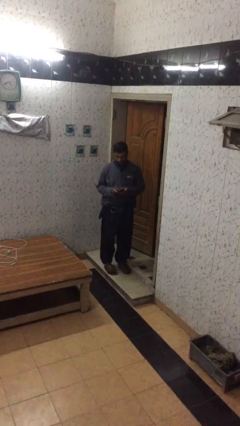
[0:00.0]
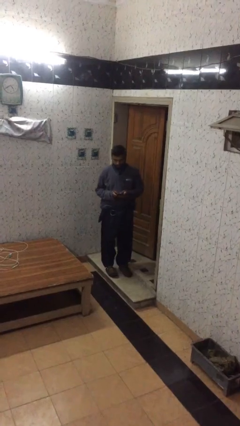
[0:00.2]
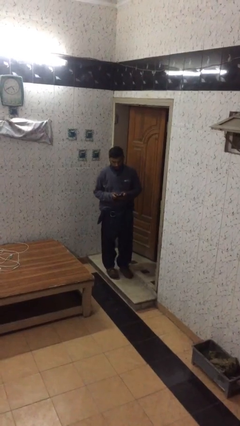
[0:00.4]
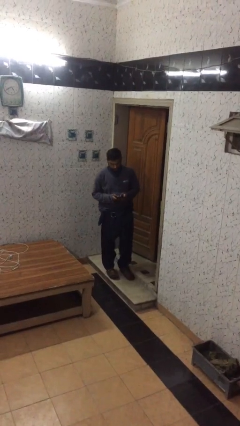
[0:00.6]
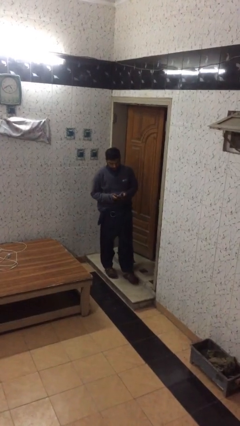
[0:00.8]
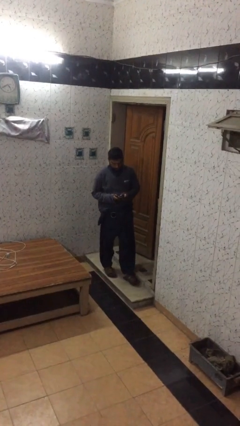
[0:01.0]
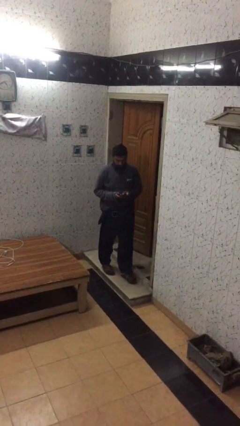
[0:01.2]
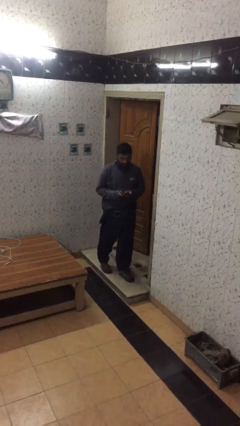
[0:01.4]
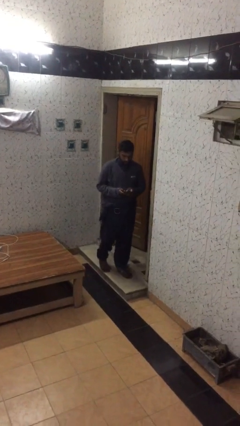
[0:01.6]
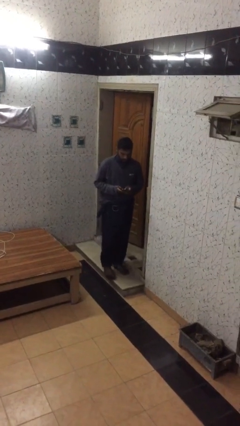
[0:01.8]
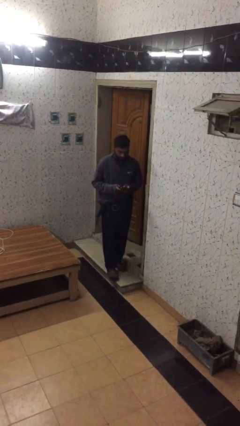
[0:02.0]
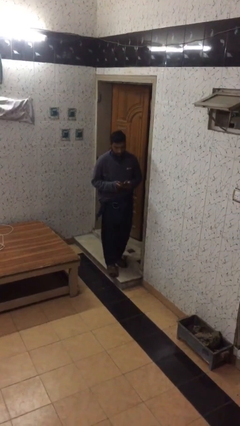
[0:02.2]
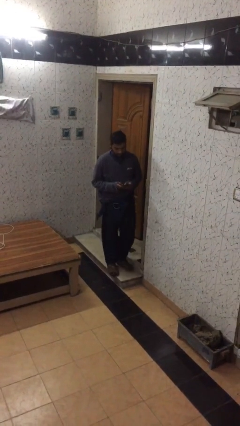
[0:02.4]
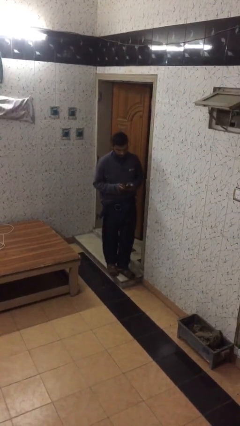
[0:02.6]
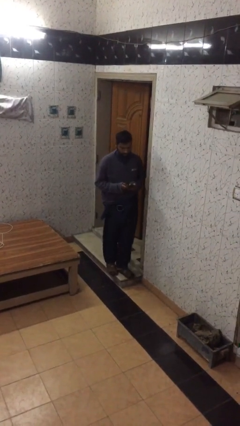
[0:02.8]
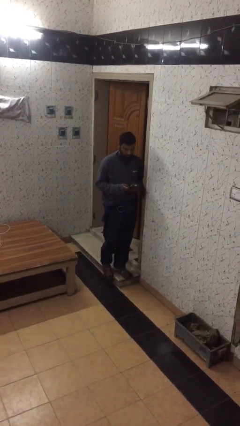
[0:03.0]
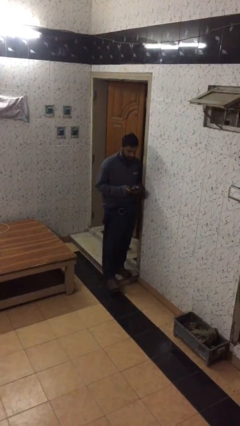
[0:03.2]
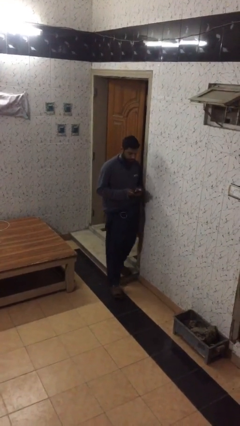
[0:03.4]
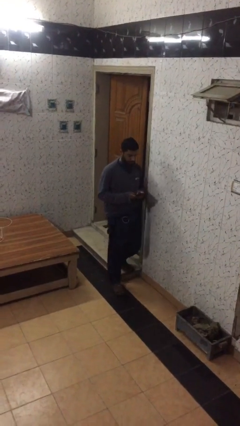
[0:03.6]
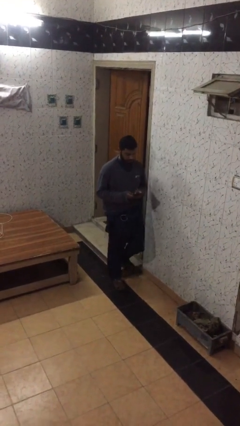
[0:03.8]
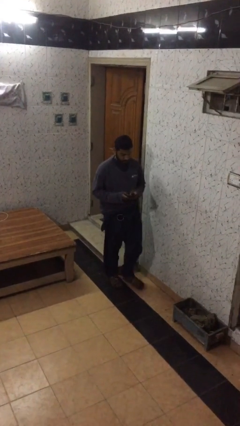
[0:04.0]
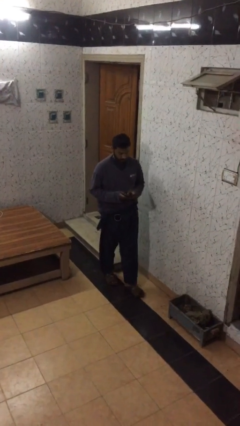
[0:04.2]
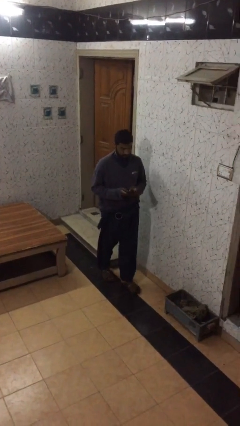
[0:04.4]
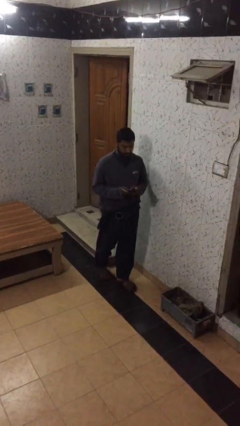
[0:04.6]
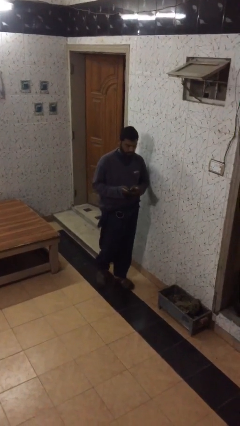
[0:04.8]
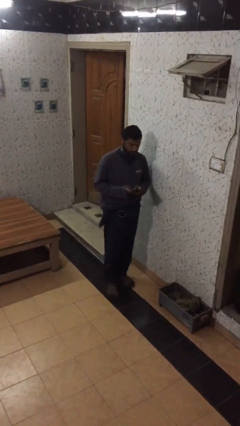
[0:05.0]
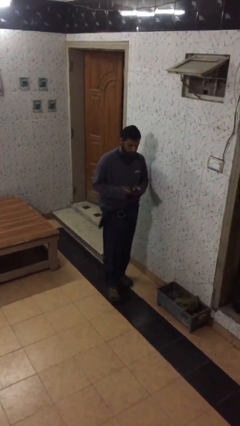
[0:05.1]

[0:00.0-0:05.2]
person texts on phone

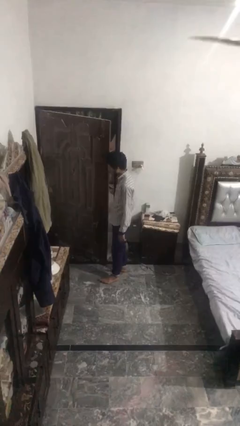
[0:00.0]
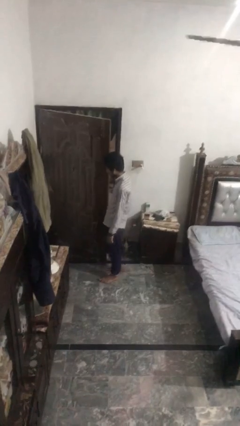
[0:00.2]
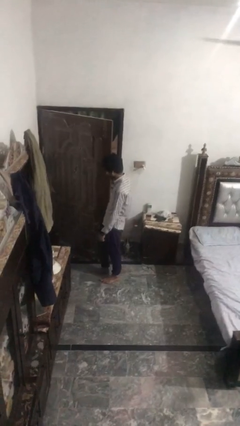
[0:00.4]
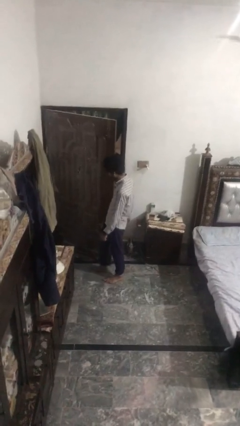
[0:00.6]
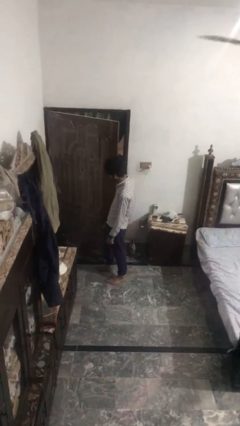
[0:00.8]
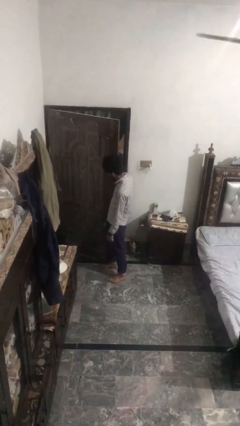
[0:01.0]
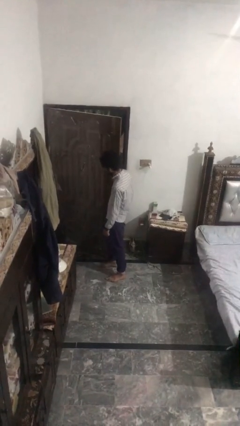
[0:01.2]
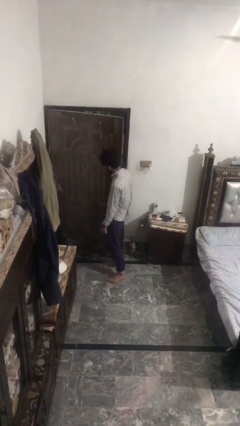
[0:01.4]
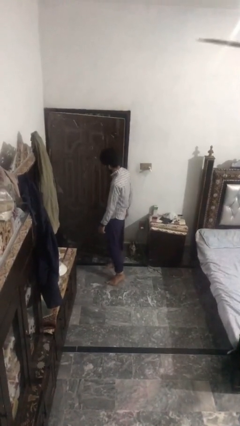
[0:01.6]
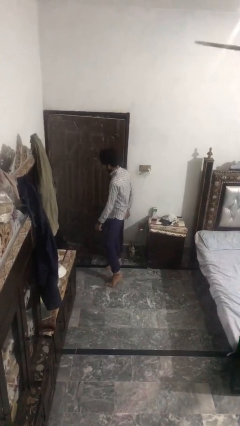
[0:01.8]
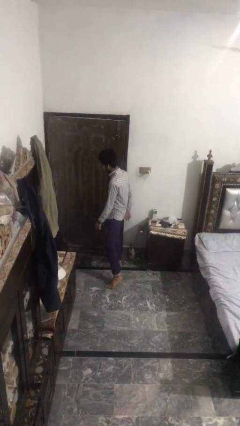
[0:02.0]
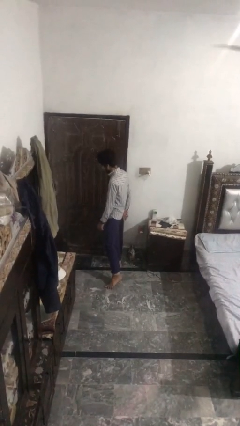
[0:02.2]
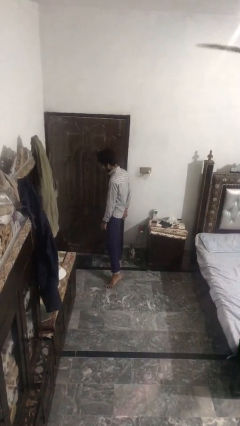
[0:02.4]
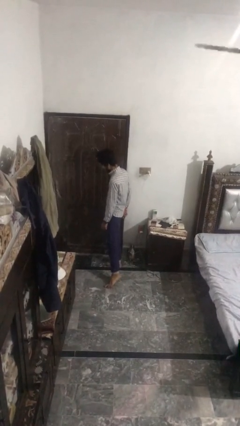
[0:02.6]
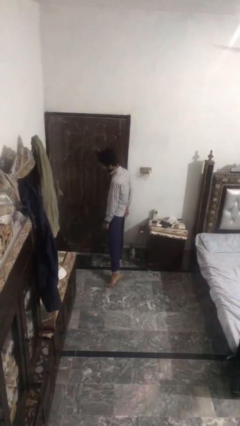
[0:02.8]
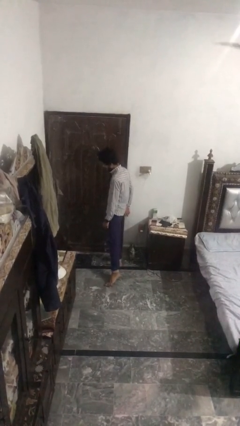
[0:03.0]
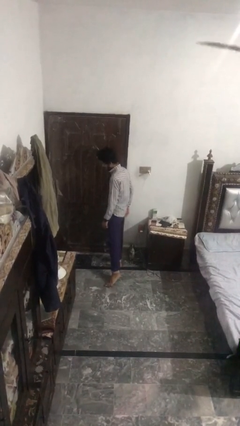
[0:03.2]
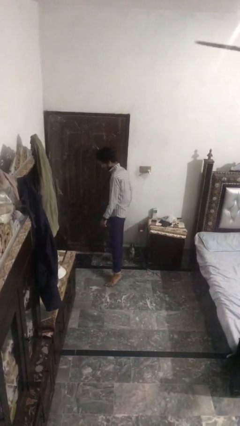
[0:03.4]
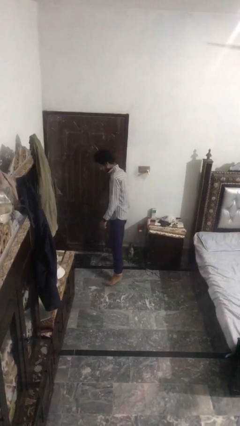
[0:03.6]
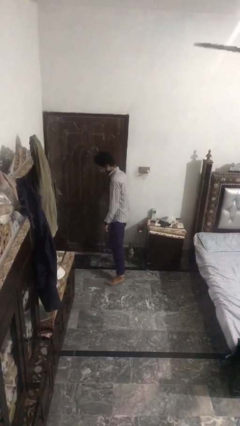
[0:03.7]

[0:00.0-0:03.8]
person closes door with hip

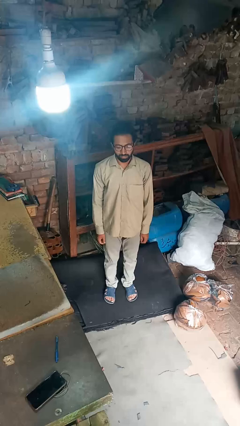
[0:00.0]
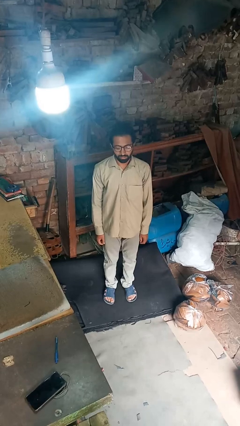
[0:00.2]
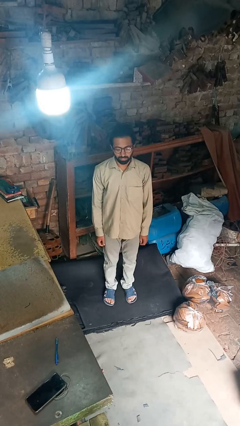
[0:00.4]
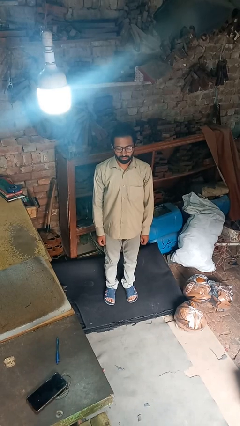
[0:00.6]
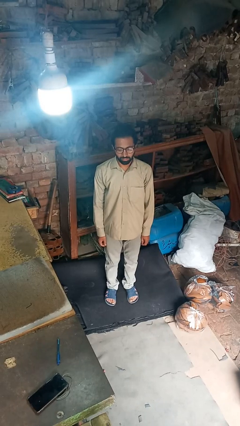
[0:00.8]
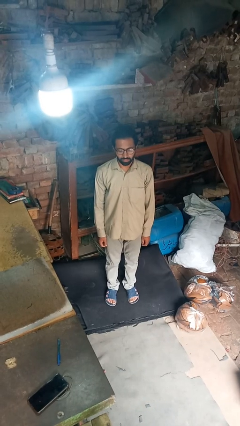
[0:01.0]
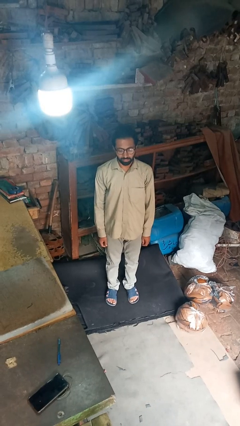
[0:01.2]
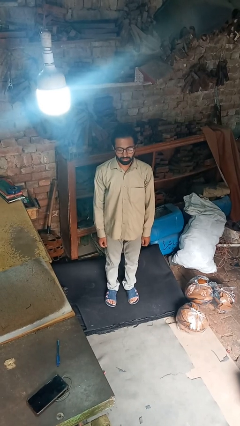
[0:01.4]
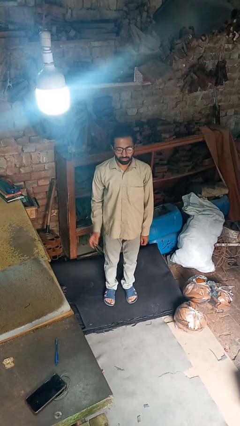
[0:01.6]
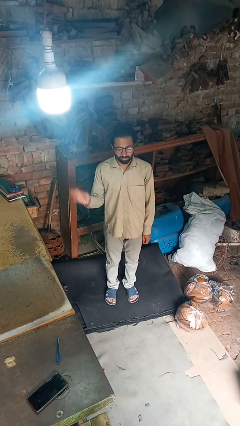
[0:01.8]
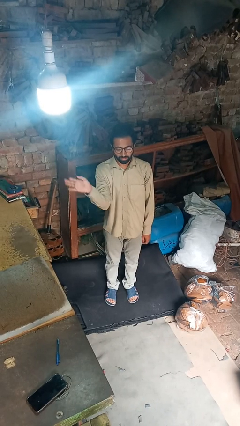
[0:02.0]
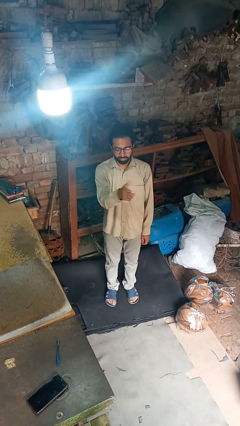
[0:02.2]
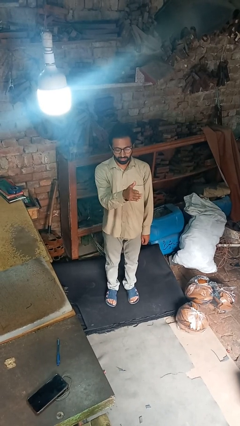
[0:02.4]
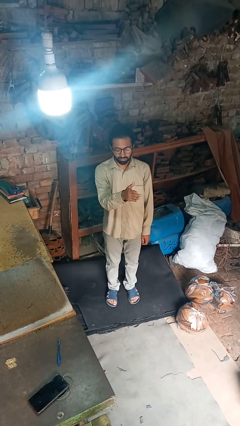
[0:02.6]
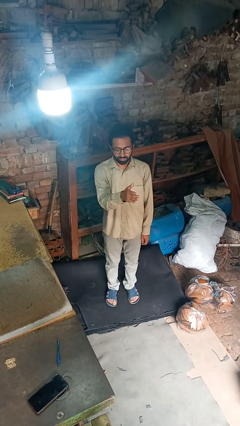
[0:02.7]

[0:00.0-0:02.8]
person punches

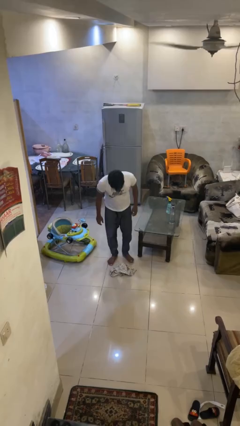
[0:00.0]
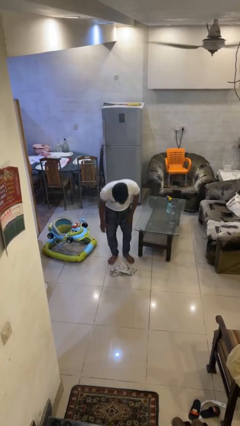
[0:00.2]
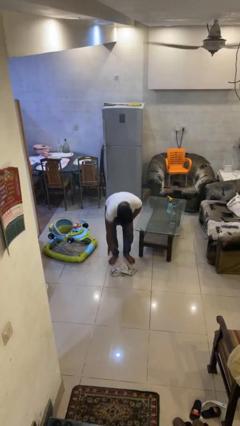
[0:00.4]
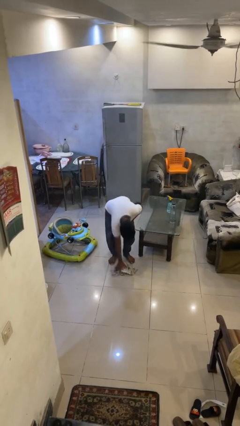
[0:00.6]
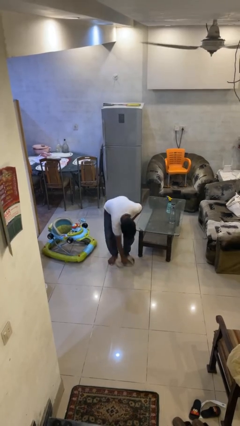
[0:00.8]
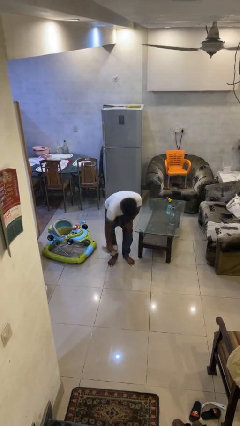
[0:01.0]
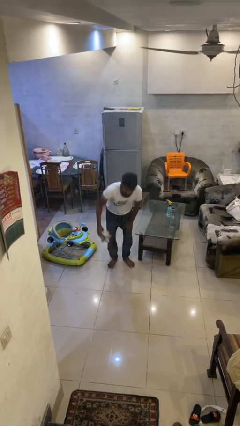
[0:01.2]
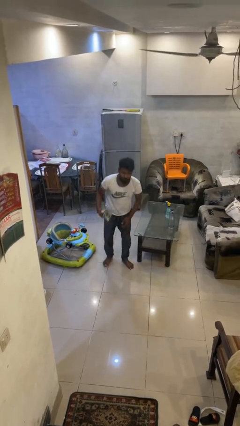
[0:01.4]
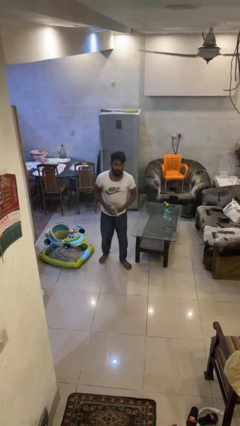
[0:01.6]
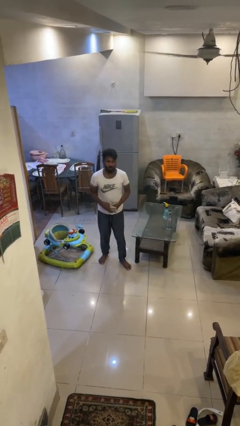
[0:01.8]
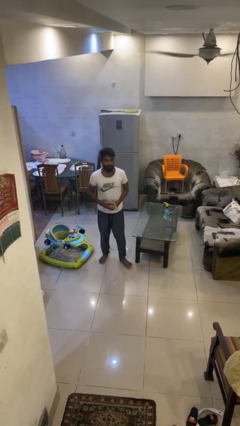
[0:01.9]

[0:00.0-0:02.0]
person picks up object from floor

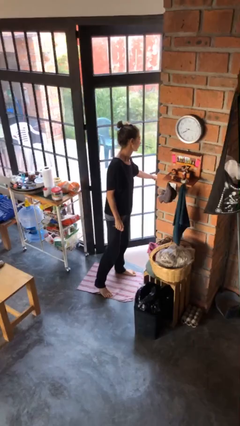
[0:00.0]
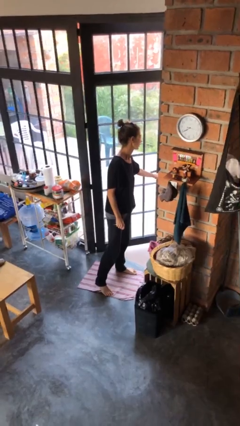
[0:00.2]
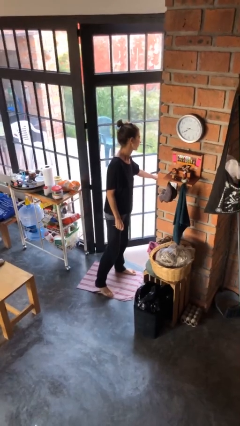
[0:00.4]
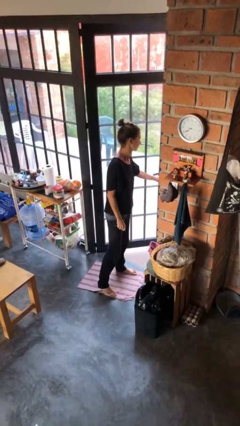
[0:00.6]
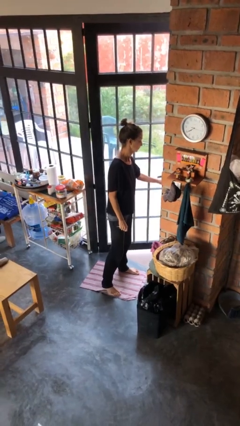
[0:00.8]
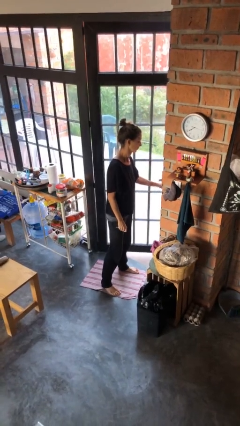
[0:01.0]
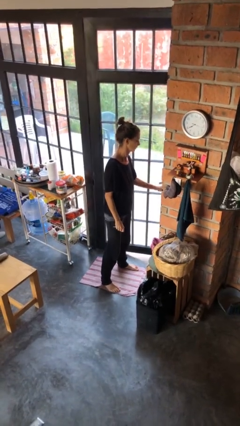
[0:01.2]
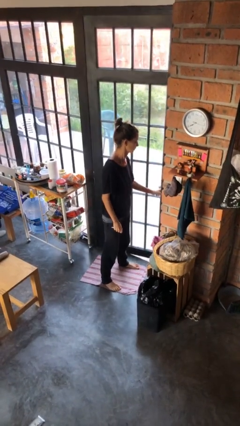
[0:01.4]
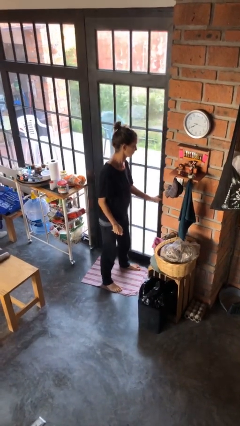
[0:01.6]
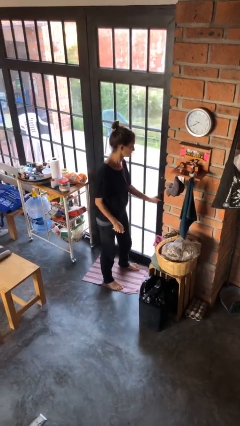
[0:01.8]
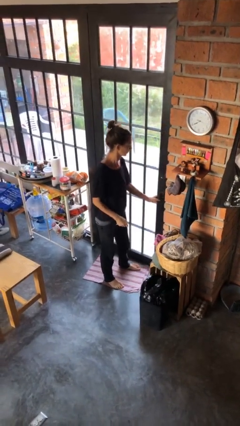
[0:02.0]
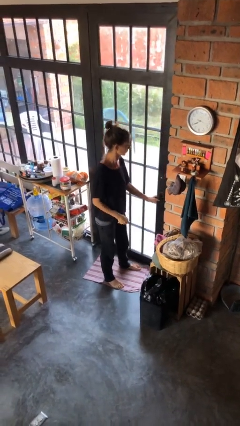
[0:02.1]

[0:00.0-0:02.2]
person closes facility door

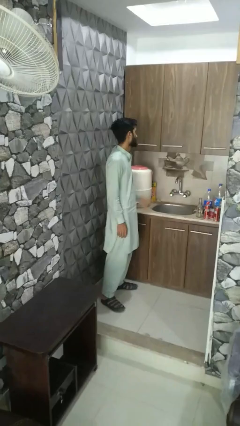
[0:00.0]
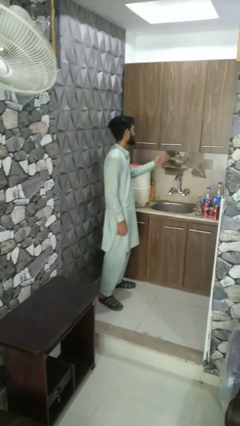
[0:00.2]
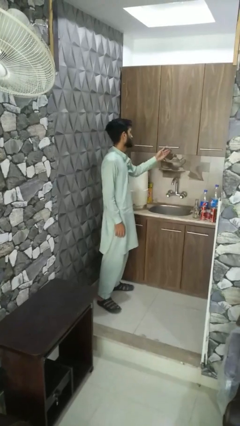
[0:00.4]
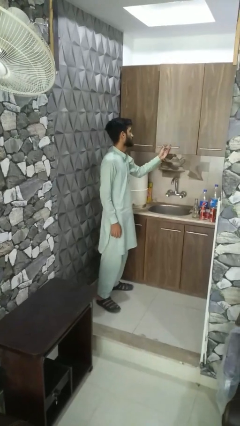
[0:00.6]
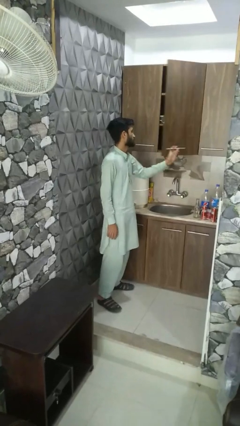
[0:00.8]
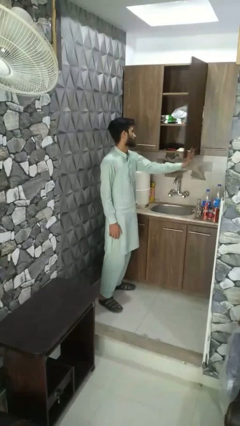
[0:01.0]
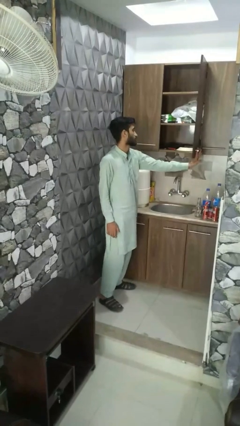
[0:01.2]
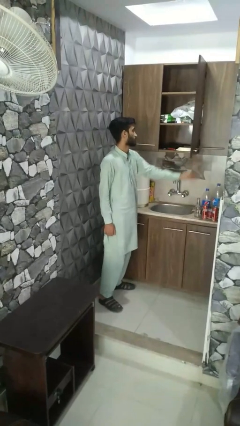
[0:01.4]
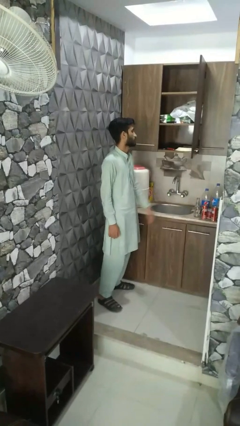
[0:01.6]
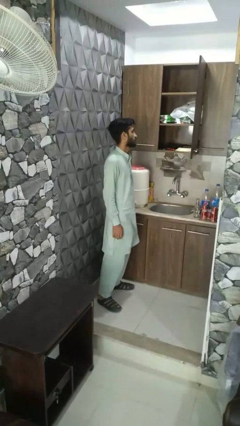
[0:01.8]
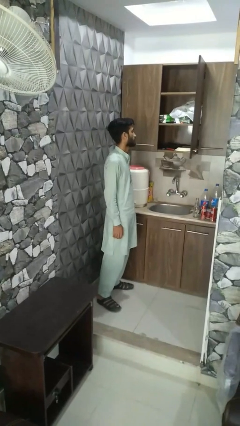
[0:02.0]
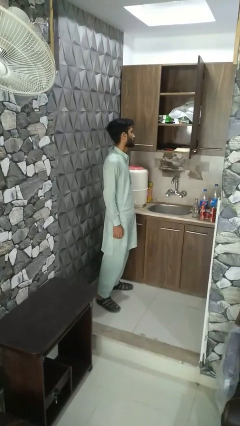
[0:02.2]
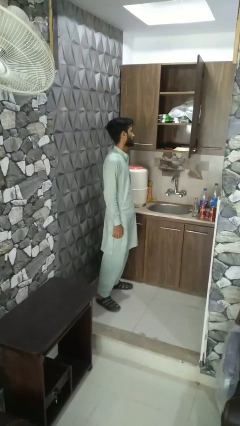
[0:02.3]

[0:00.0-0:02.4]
person opens cabinet
